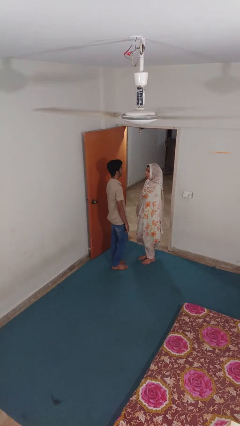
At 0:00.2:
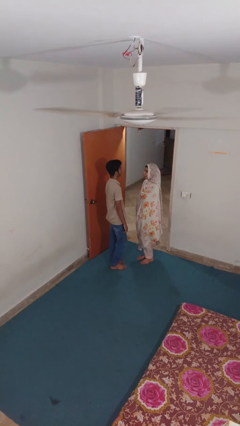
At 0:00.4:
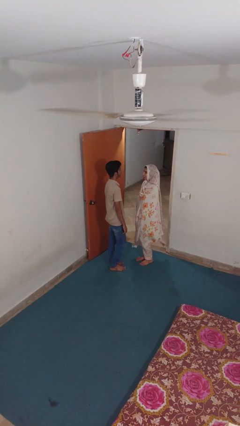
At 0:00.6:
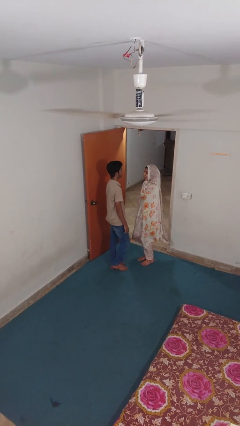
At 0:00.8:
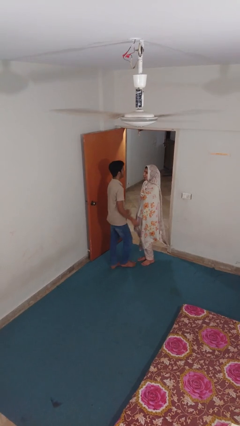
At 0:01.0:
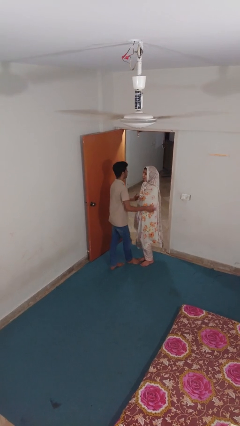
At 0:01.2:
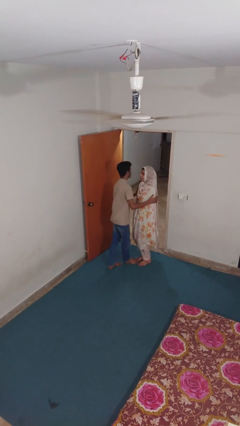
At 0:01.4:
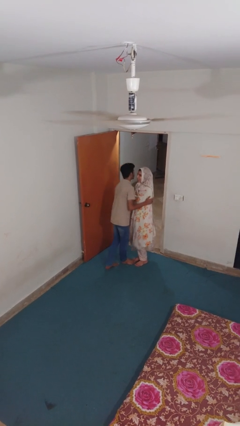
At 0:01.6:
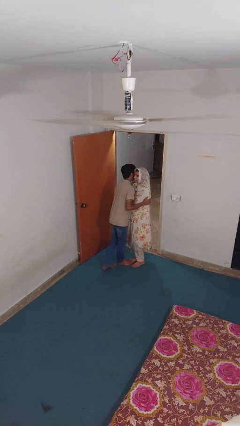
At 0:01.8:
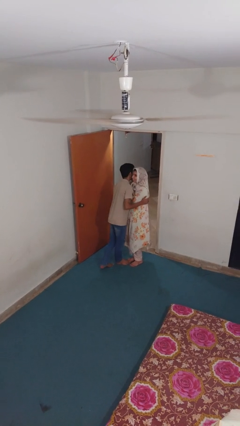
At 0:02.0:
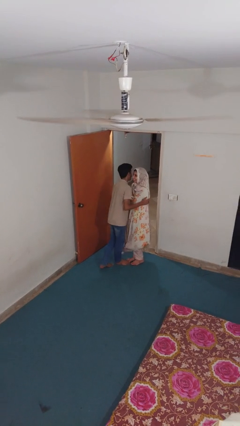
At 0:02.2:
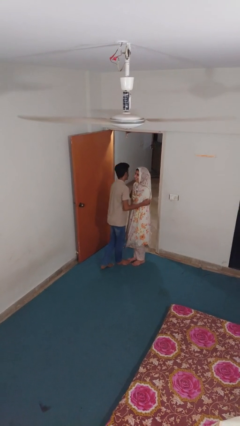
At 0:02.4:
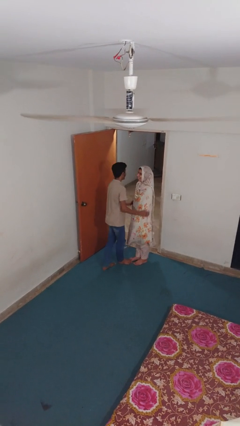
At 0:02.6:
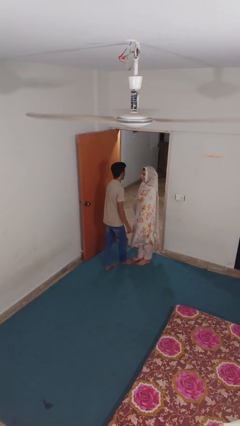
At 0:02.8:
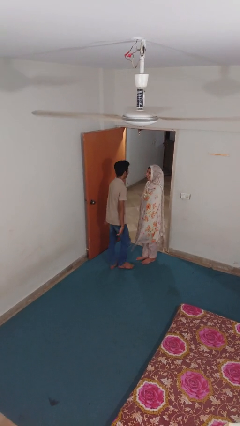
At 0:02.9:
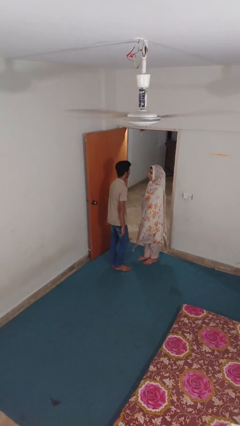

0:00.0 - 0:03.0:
person kisses cheek of person

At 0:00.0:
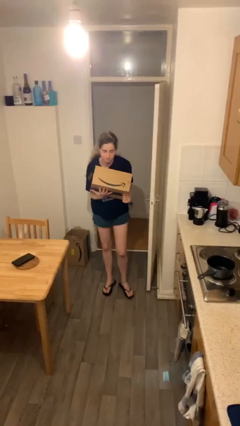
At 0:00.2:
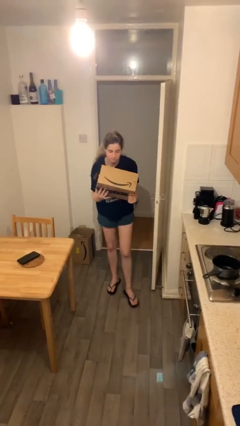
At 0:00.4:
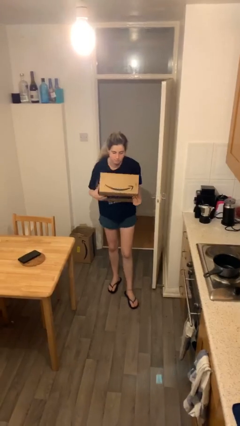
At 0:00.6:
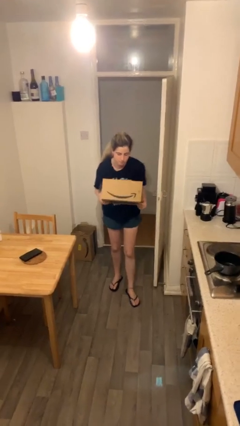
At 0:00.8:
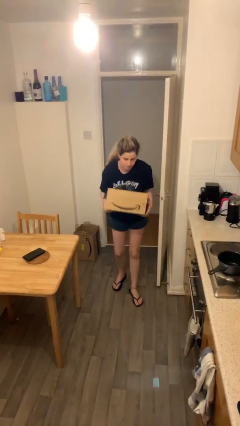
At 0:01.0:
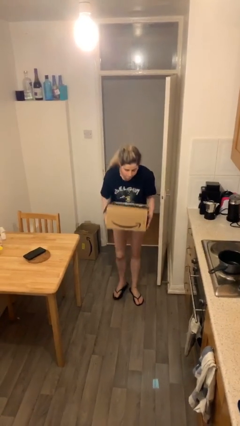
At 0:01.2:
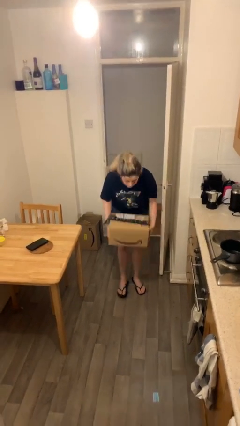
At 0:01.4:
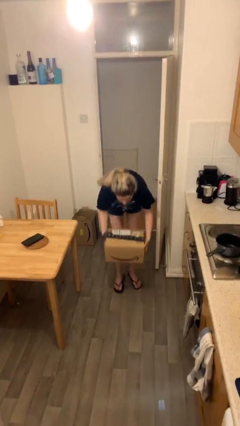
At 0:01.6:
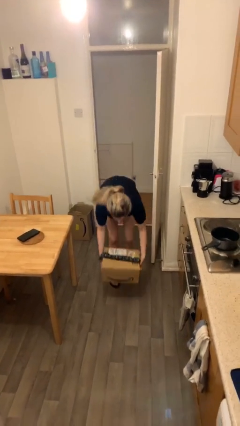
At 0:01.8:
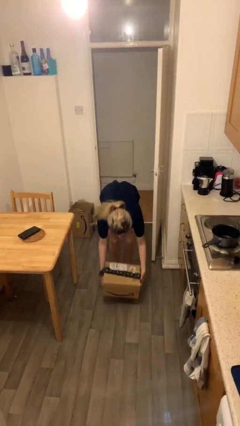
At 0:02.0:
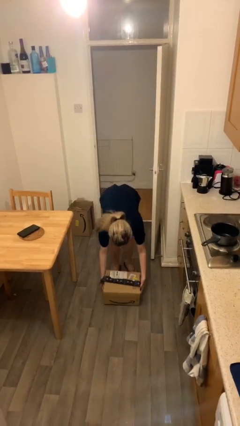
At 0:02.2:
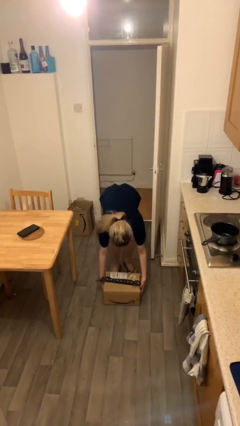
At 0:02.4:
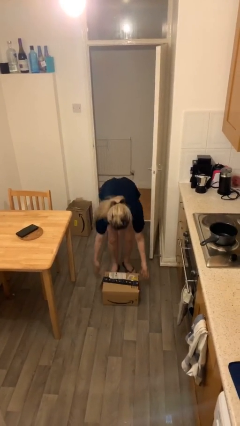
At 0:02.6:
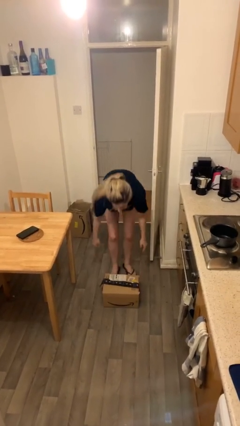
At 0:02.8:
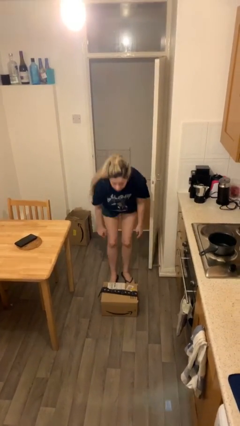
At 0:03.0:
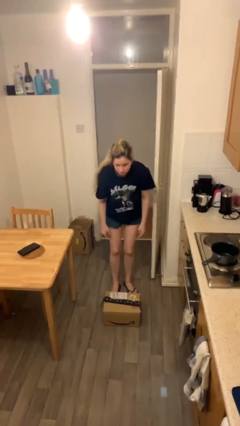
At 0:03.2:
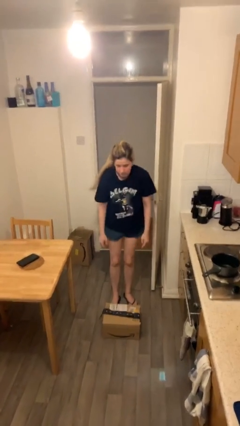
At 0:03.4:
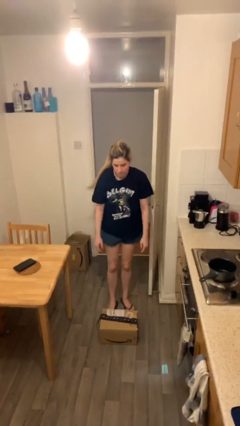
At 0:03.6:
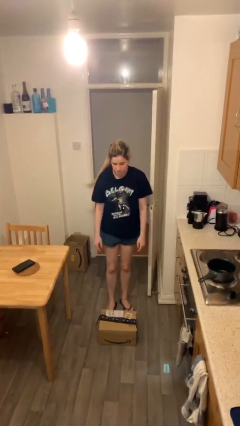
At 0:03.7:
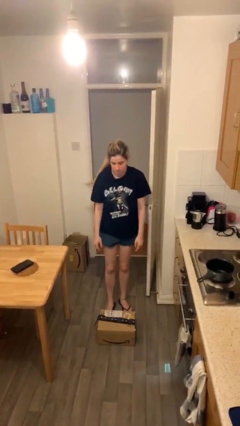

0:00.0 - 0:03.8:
person puts down object on floor

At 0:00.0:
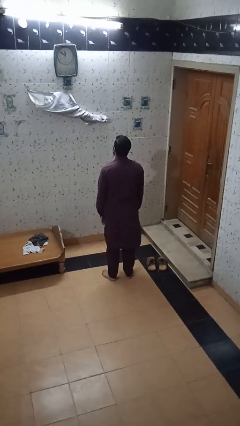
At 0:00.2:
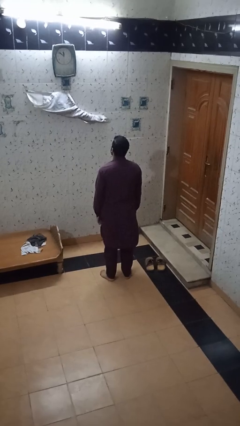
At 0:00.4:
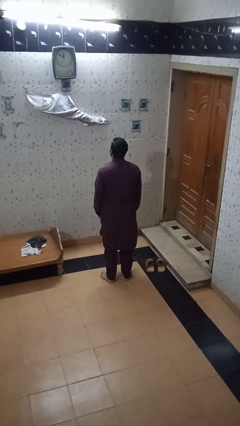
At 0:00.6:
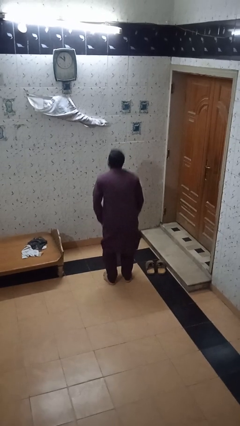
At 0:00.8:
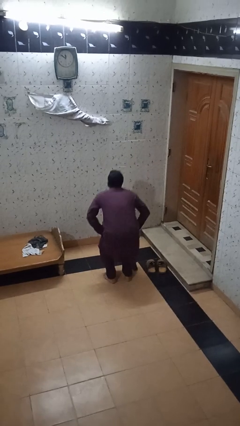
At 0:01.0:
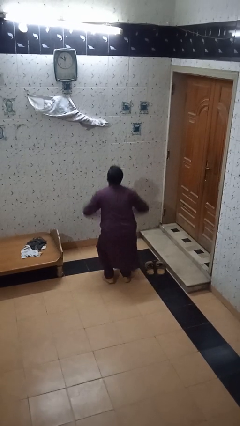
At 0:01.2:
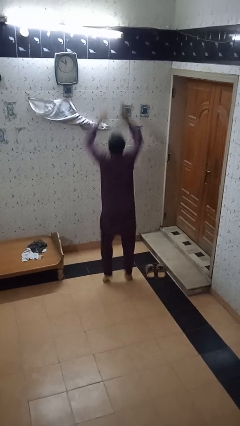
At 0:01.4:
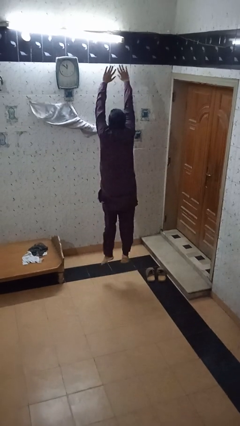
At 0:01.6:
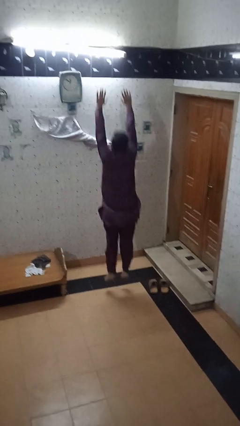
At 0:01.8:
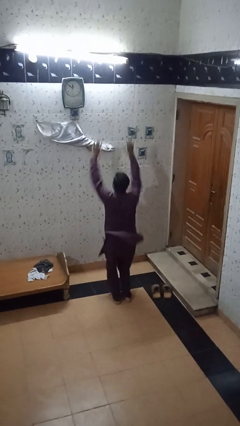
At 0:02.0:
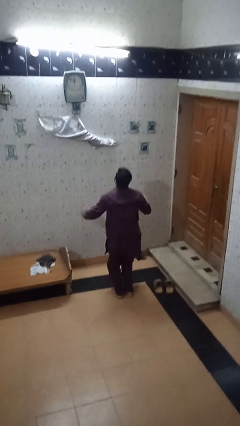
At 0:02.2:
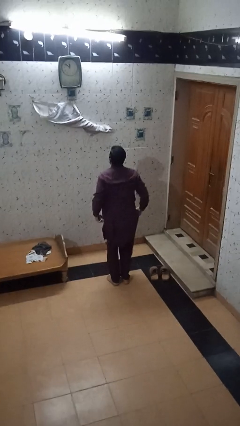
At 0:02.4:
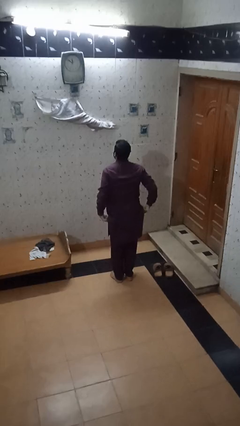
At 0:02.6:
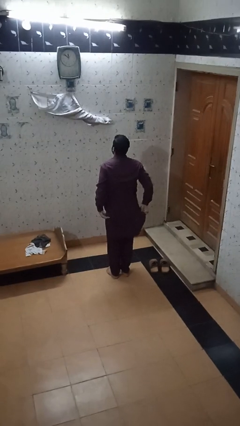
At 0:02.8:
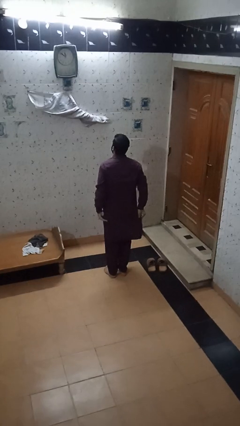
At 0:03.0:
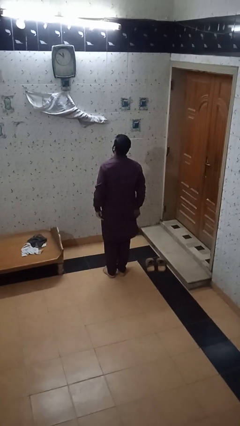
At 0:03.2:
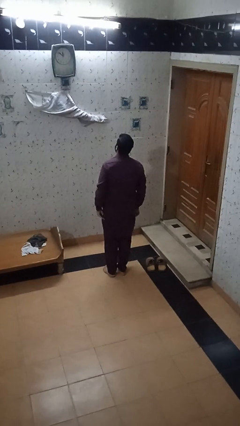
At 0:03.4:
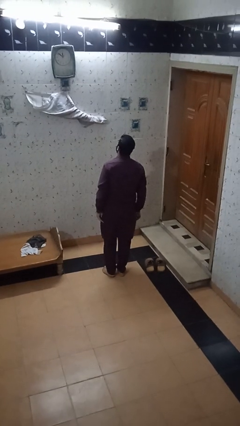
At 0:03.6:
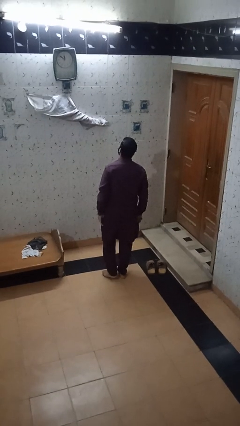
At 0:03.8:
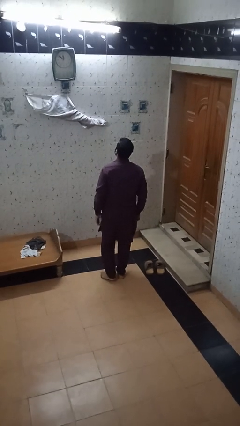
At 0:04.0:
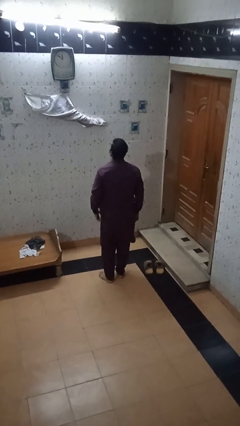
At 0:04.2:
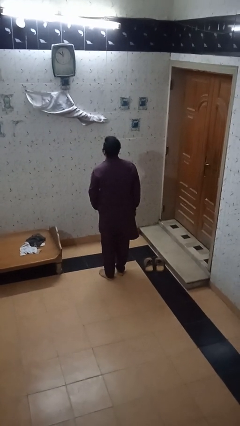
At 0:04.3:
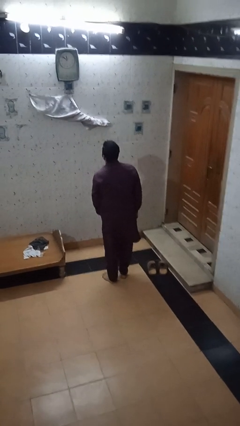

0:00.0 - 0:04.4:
person jumps

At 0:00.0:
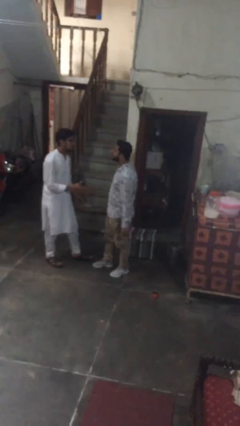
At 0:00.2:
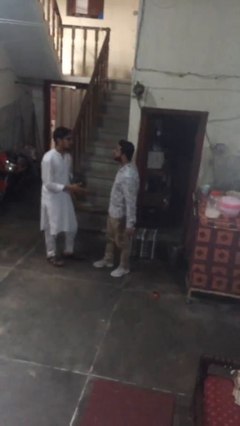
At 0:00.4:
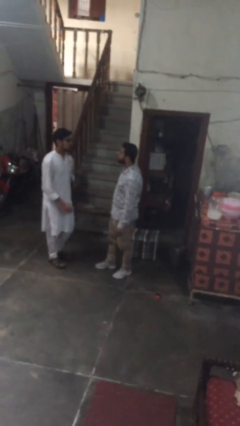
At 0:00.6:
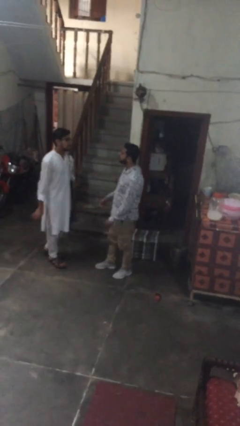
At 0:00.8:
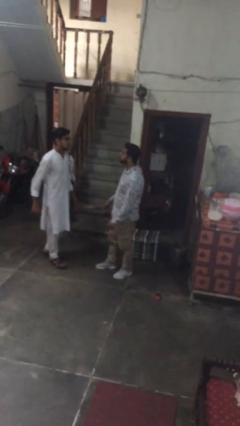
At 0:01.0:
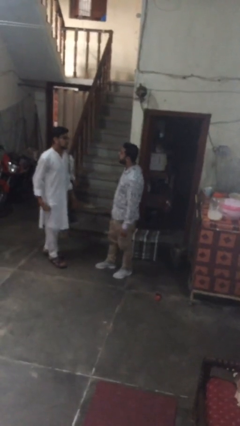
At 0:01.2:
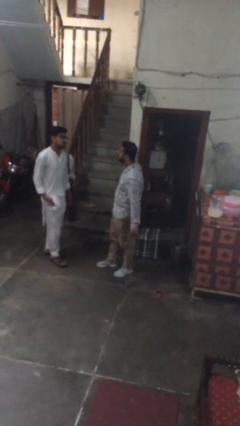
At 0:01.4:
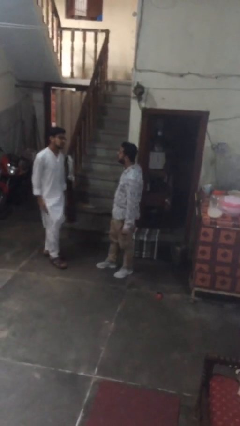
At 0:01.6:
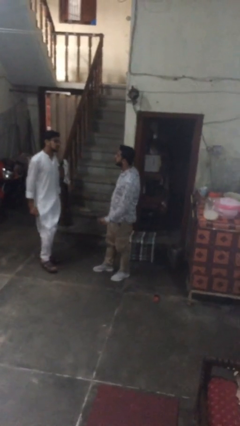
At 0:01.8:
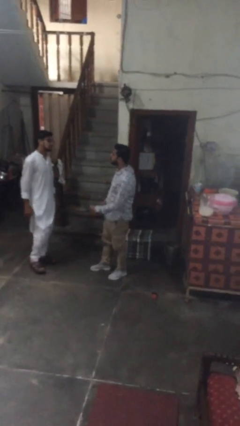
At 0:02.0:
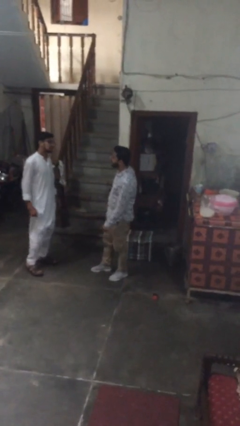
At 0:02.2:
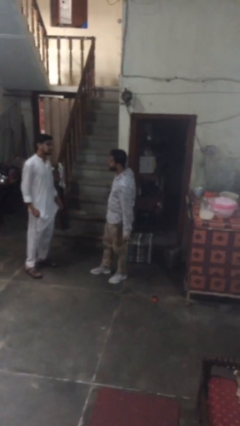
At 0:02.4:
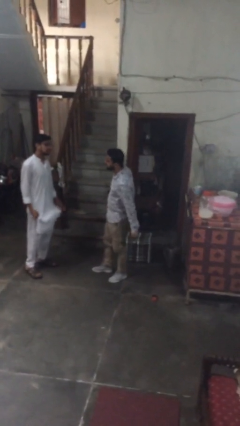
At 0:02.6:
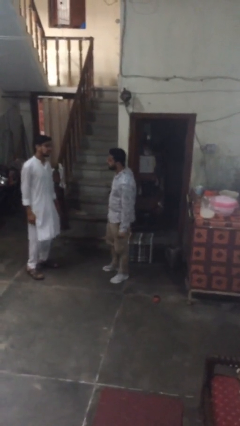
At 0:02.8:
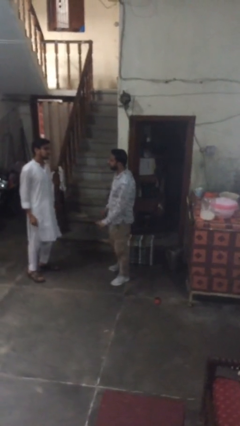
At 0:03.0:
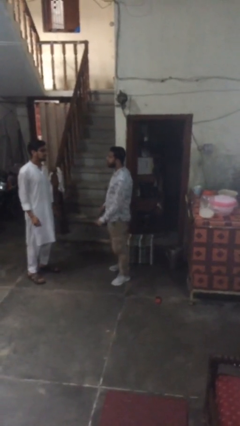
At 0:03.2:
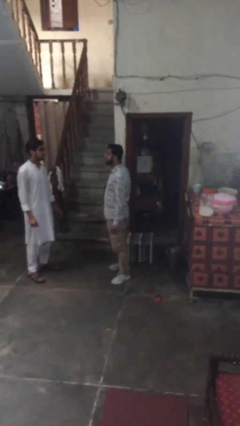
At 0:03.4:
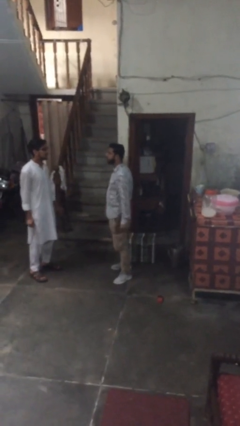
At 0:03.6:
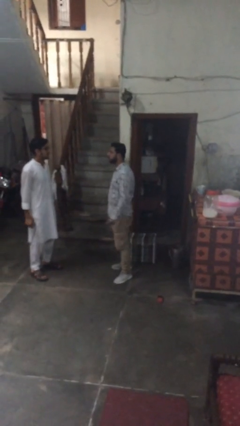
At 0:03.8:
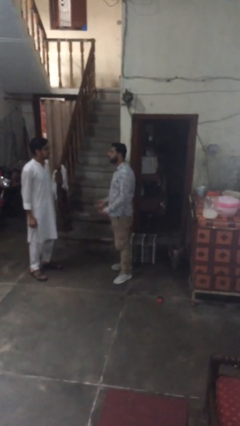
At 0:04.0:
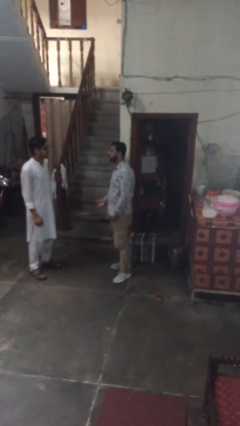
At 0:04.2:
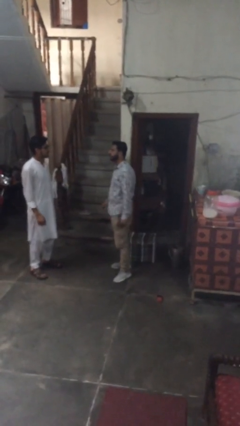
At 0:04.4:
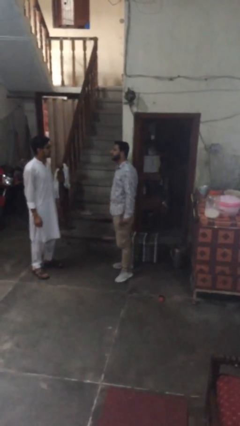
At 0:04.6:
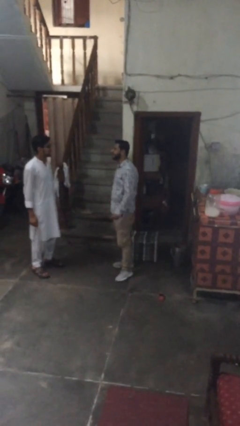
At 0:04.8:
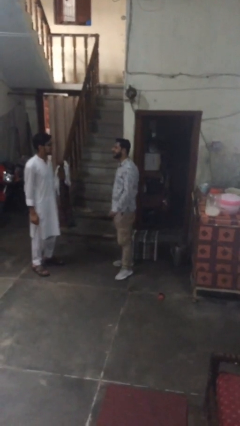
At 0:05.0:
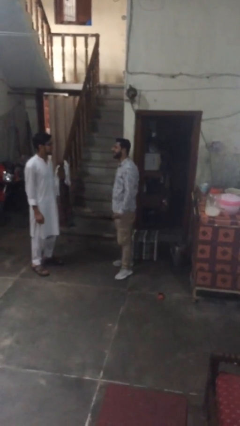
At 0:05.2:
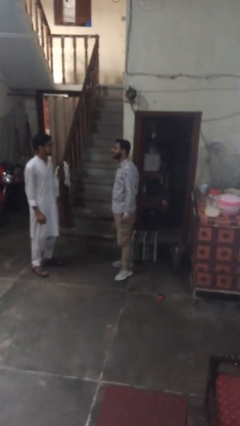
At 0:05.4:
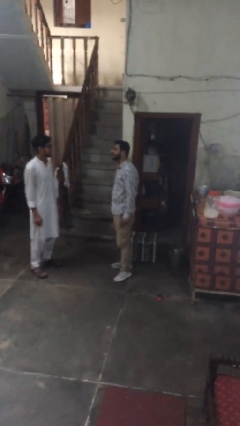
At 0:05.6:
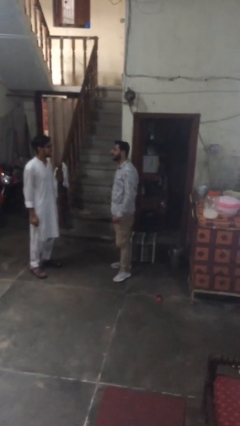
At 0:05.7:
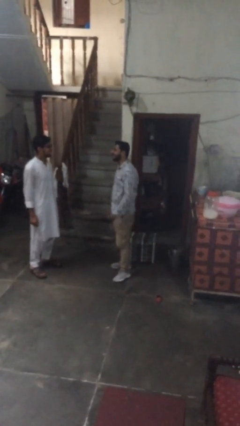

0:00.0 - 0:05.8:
person talks to person

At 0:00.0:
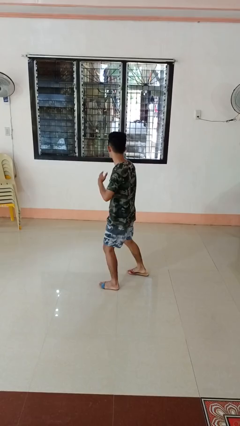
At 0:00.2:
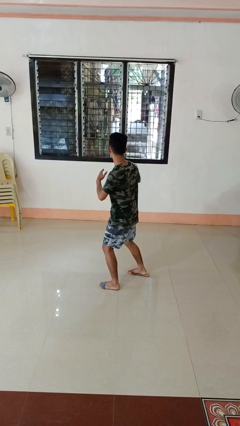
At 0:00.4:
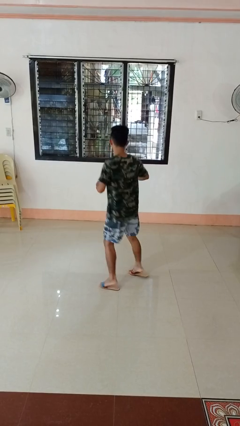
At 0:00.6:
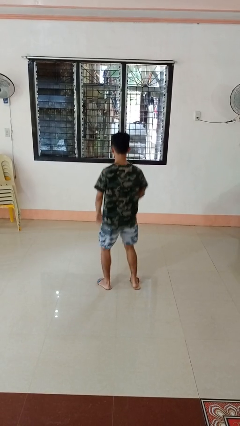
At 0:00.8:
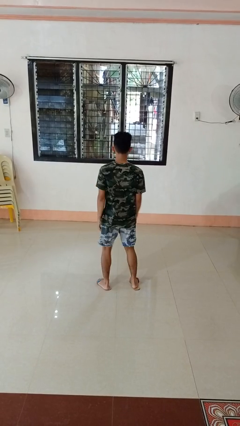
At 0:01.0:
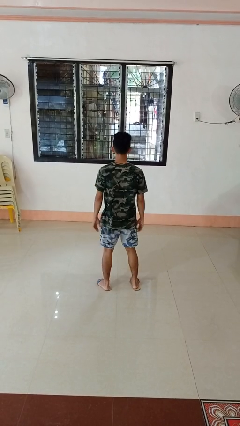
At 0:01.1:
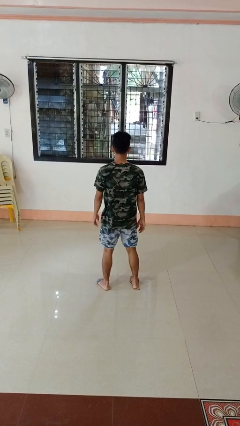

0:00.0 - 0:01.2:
person karate chop
